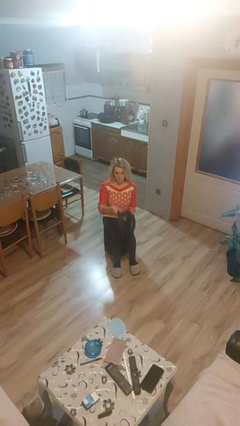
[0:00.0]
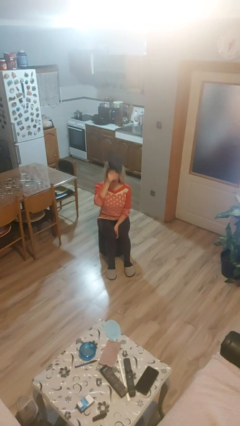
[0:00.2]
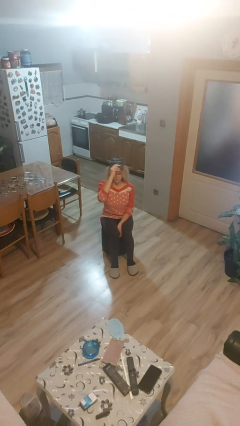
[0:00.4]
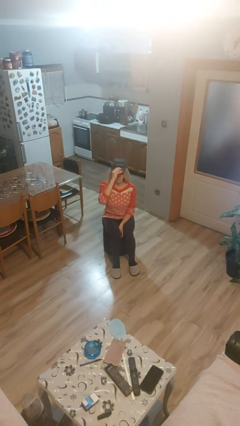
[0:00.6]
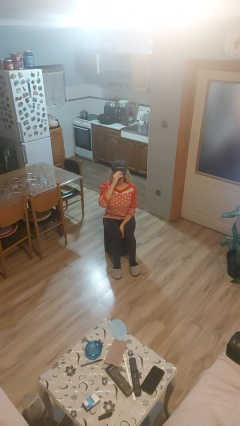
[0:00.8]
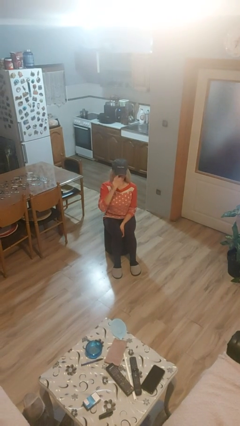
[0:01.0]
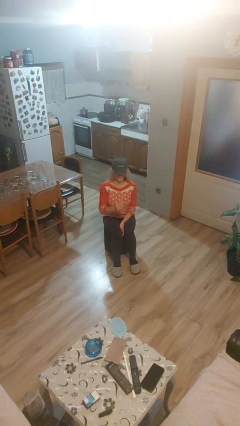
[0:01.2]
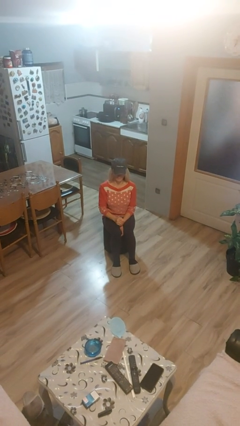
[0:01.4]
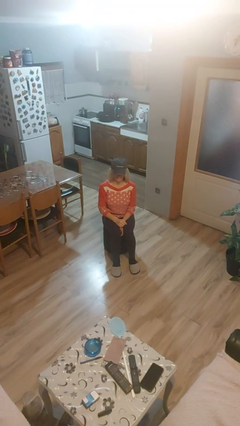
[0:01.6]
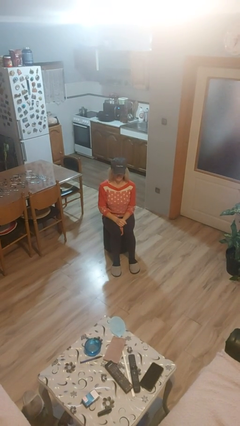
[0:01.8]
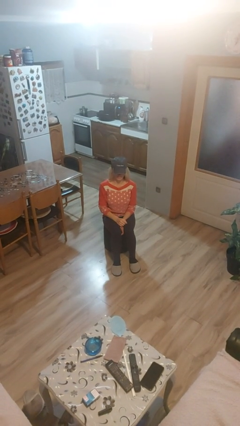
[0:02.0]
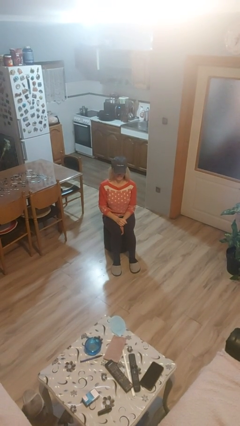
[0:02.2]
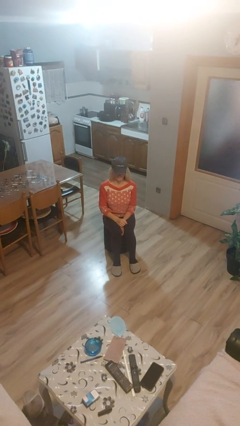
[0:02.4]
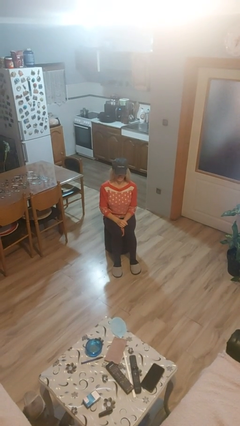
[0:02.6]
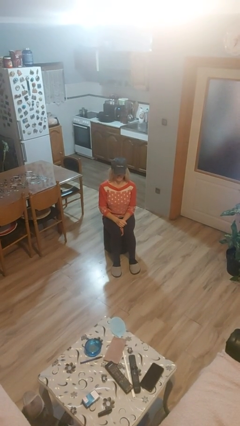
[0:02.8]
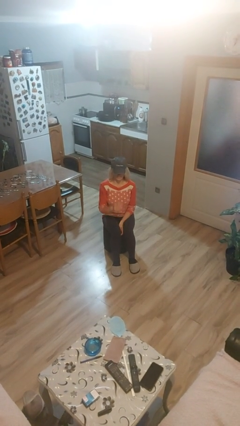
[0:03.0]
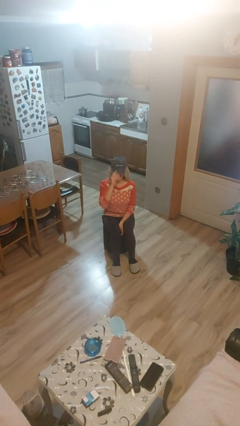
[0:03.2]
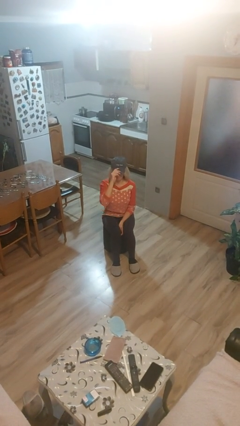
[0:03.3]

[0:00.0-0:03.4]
person puts on hat

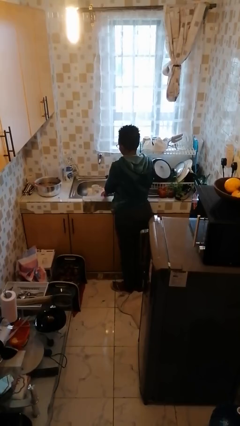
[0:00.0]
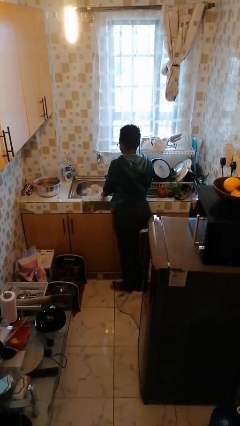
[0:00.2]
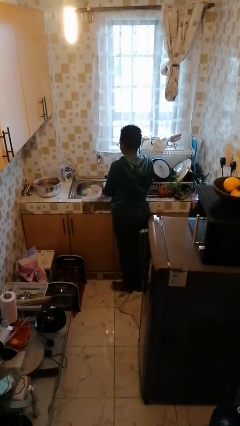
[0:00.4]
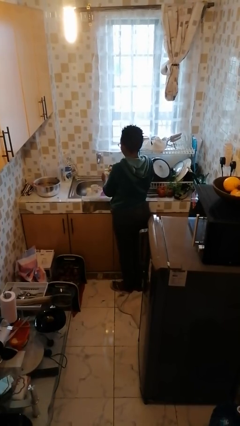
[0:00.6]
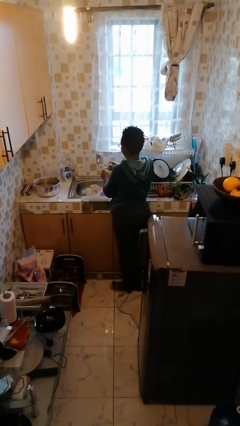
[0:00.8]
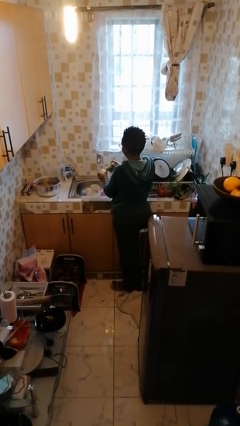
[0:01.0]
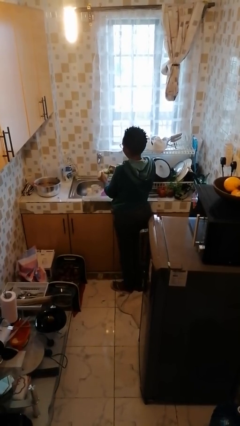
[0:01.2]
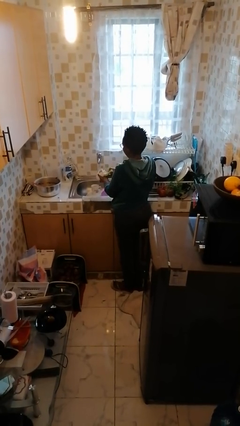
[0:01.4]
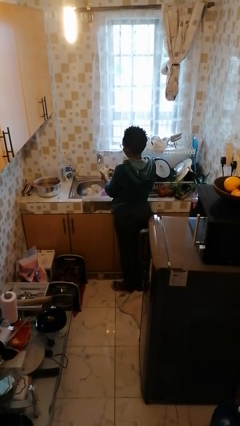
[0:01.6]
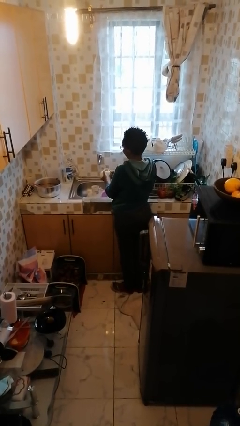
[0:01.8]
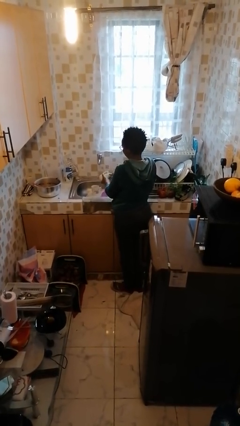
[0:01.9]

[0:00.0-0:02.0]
person washes dish

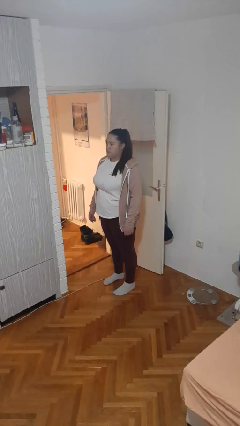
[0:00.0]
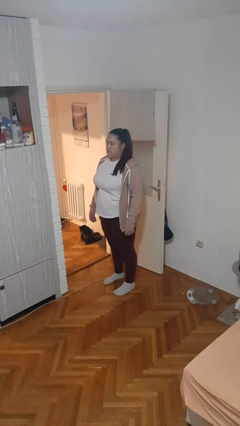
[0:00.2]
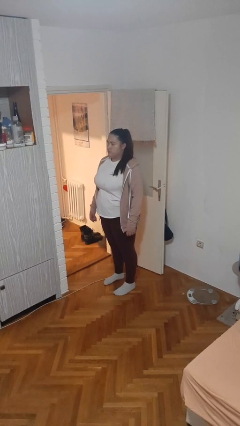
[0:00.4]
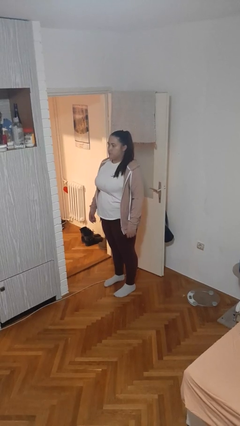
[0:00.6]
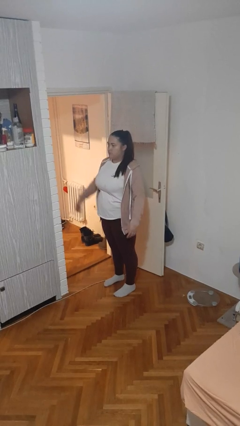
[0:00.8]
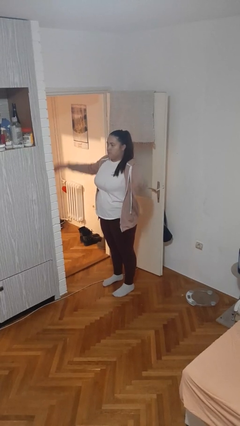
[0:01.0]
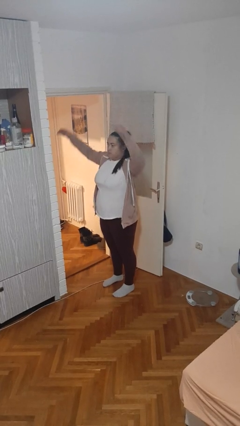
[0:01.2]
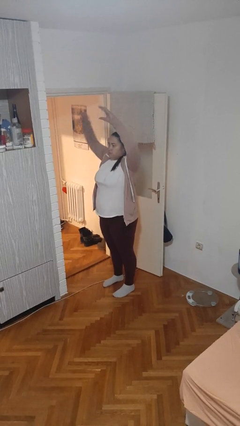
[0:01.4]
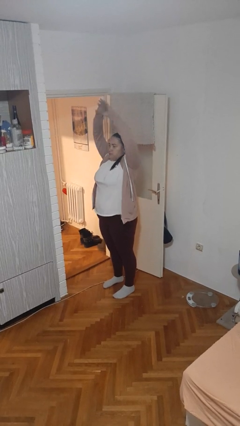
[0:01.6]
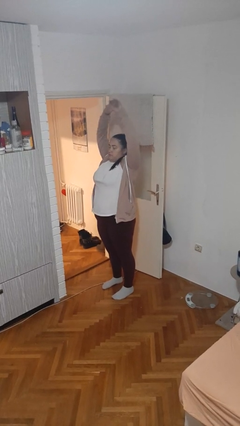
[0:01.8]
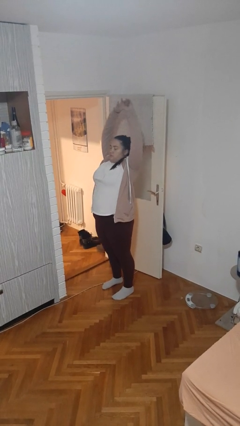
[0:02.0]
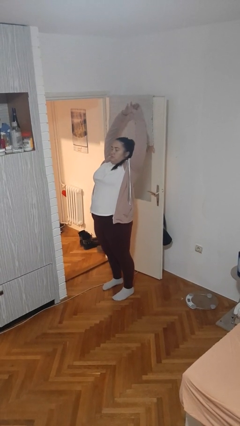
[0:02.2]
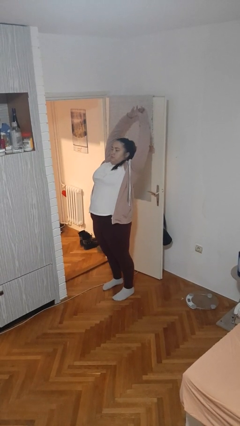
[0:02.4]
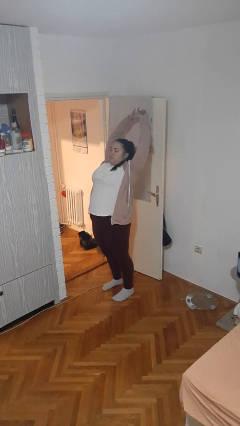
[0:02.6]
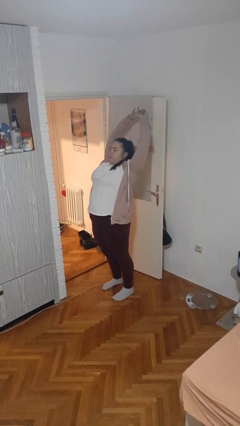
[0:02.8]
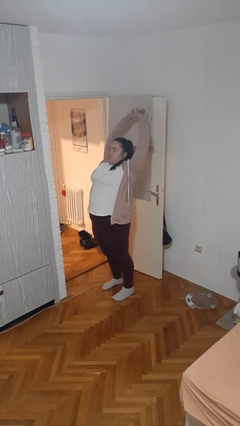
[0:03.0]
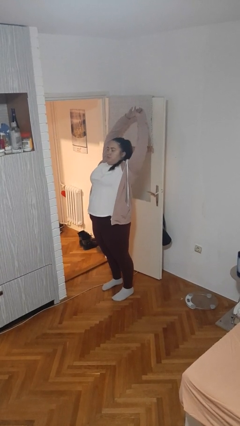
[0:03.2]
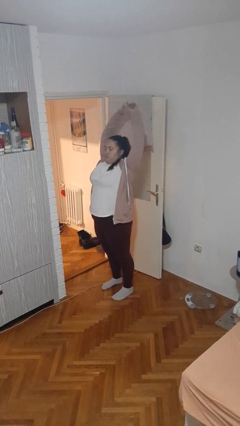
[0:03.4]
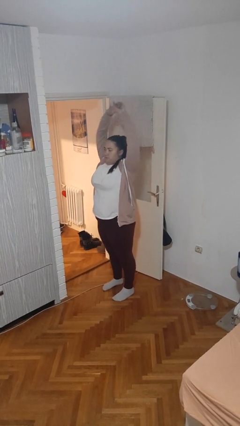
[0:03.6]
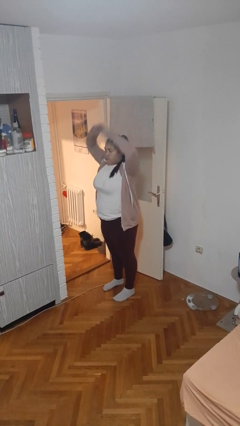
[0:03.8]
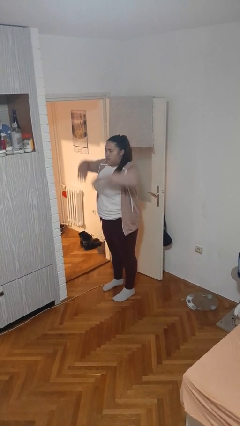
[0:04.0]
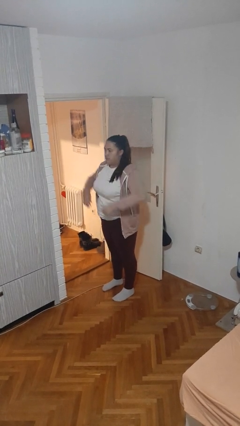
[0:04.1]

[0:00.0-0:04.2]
person stretches arms over head

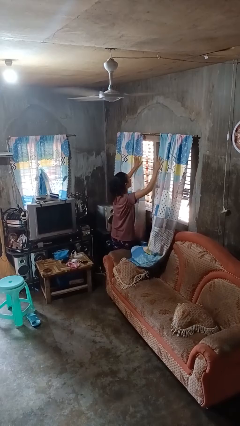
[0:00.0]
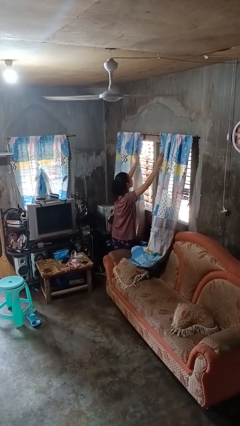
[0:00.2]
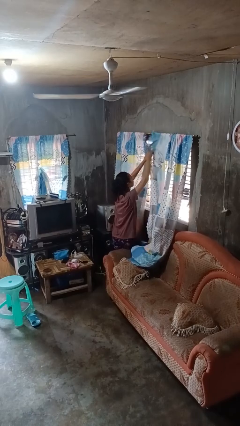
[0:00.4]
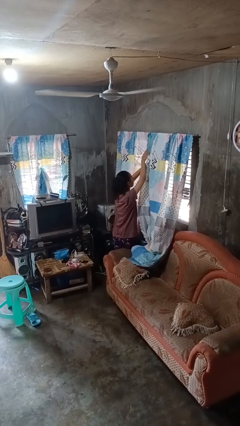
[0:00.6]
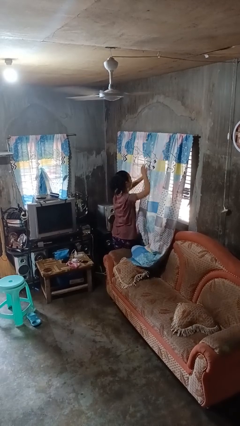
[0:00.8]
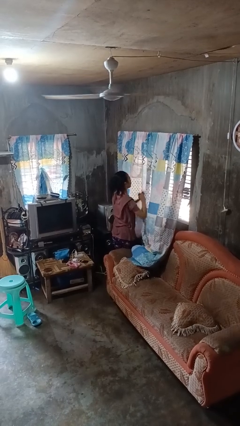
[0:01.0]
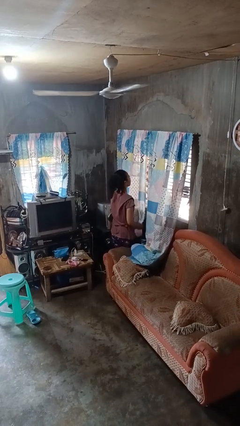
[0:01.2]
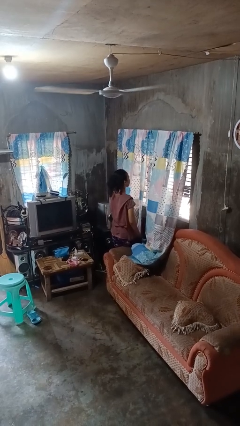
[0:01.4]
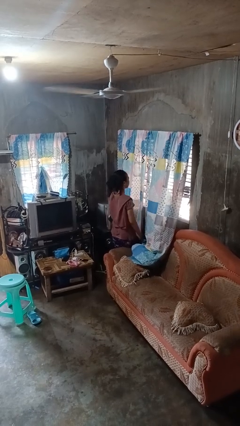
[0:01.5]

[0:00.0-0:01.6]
person closes curtains

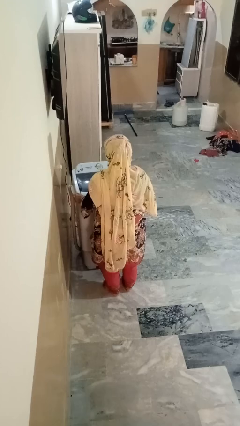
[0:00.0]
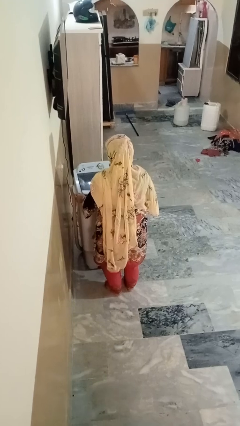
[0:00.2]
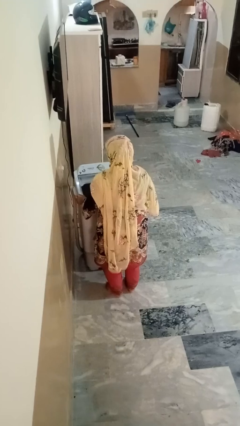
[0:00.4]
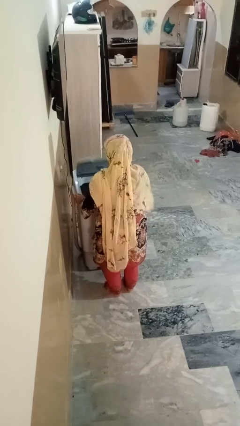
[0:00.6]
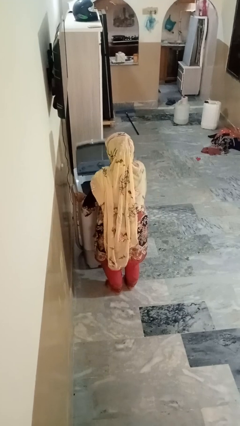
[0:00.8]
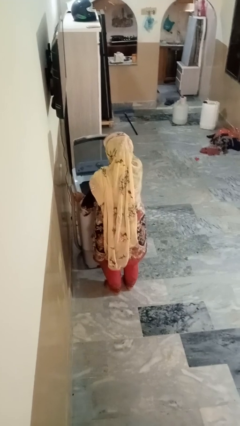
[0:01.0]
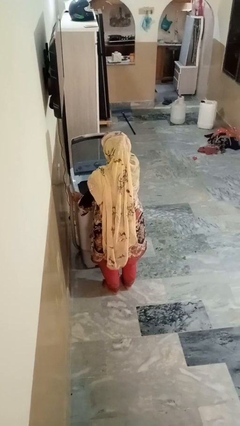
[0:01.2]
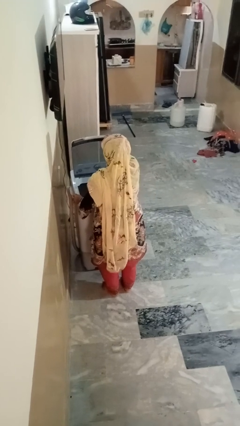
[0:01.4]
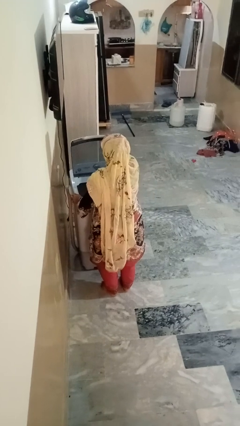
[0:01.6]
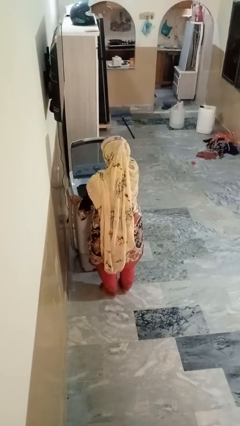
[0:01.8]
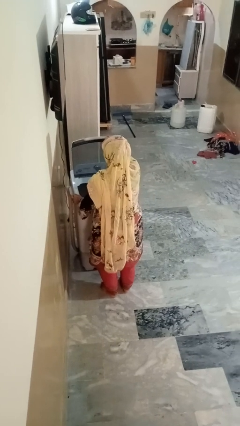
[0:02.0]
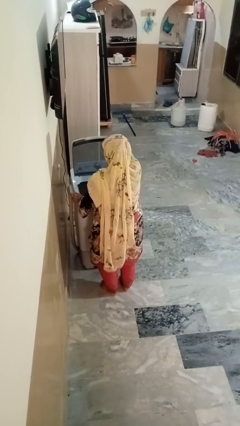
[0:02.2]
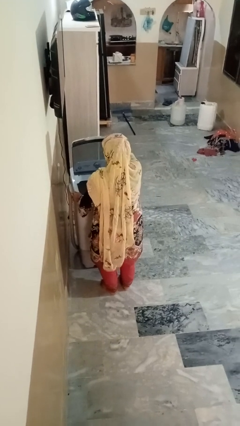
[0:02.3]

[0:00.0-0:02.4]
person opens clothes washer

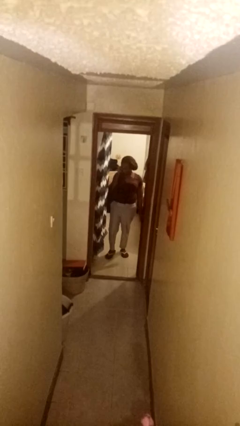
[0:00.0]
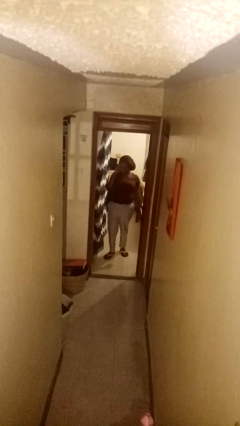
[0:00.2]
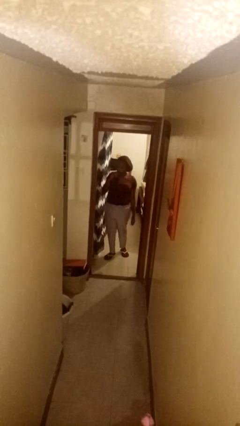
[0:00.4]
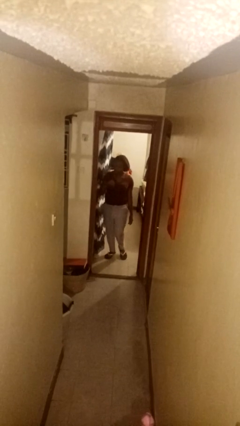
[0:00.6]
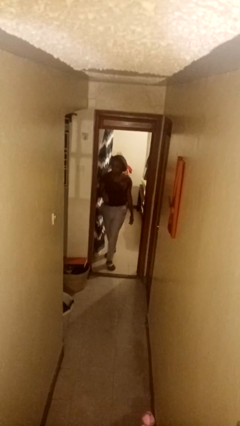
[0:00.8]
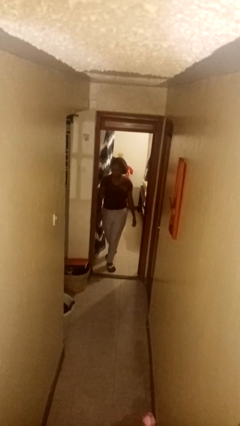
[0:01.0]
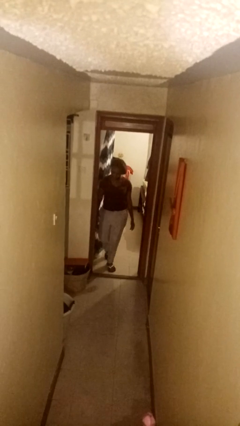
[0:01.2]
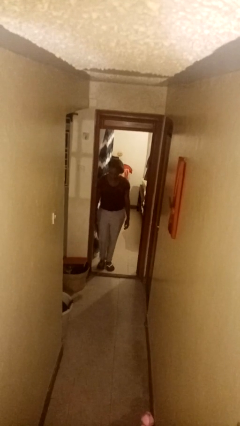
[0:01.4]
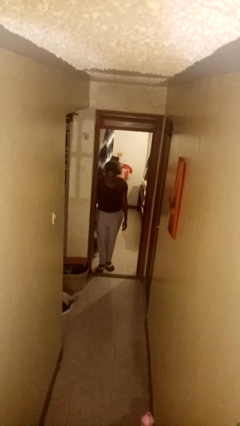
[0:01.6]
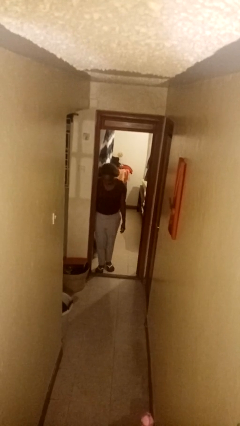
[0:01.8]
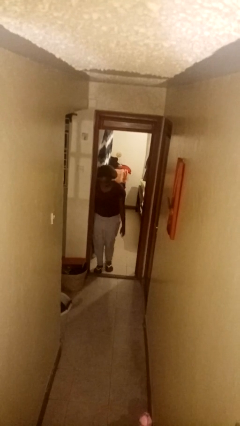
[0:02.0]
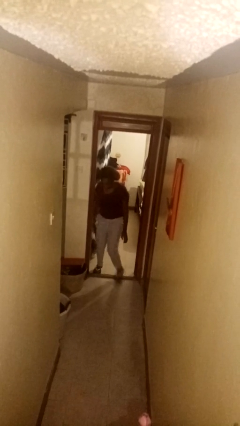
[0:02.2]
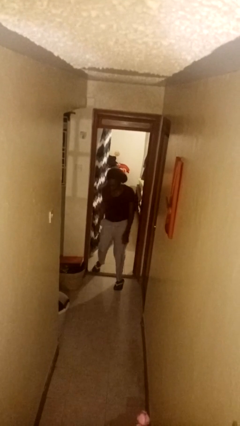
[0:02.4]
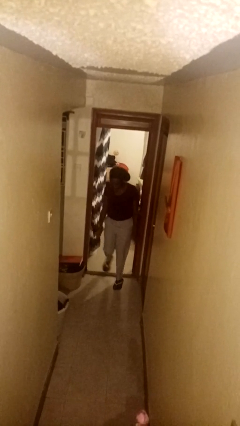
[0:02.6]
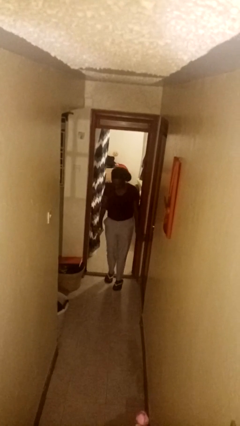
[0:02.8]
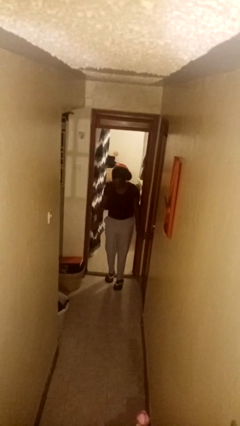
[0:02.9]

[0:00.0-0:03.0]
person bumps into wall

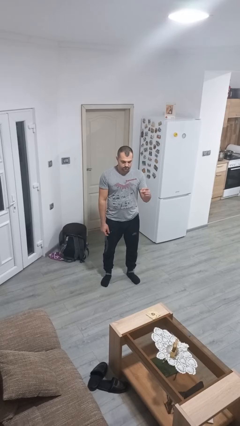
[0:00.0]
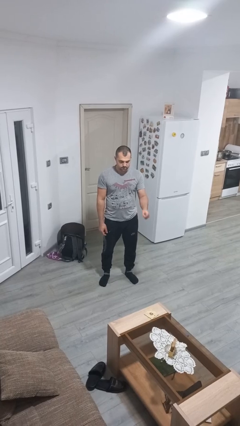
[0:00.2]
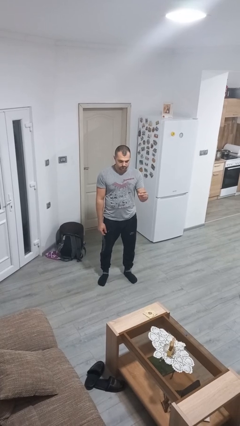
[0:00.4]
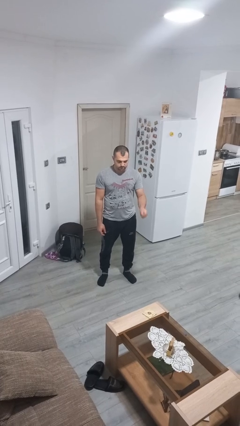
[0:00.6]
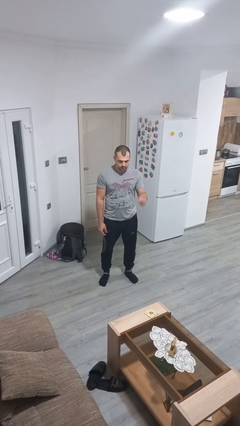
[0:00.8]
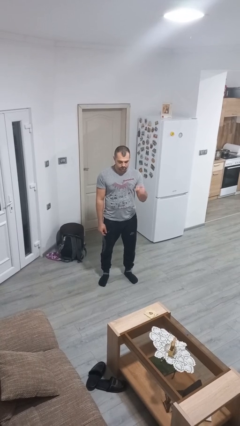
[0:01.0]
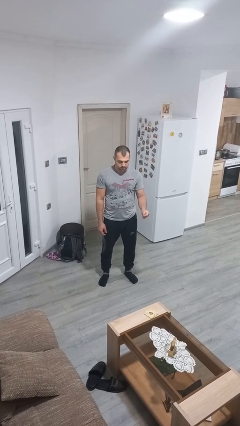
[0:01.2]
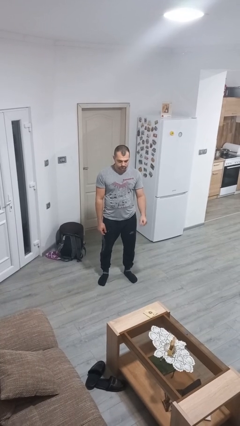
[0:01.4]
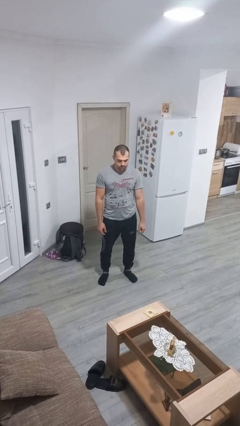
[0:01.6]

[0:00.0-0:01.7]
person snaps fingers
